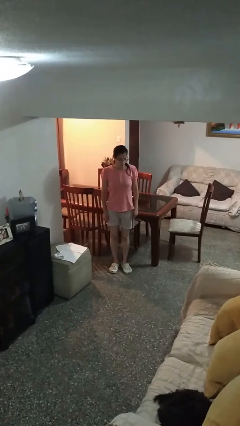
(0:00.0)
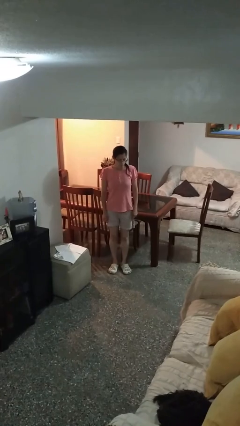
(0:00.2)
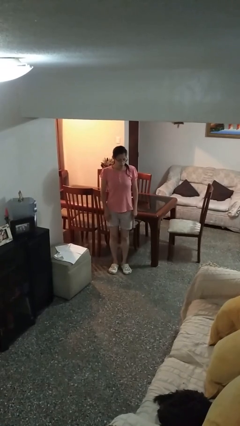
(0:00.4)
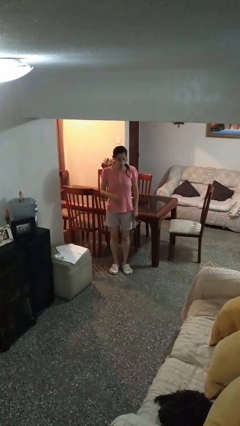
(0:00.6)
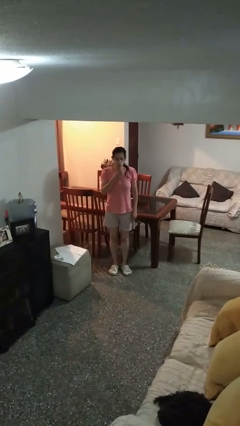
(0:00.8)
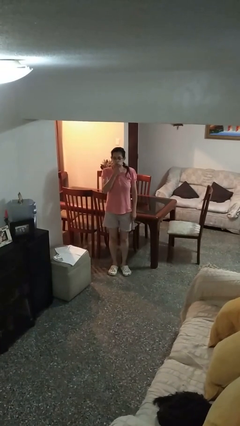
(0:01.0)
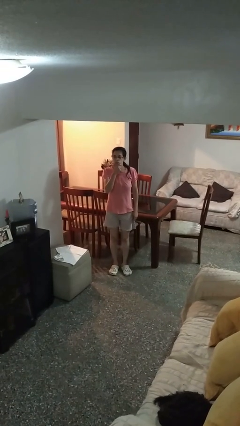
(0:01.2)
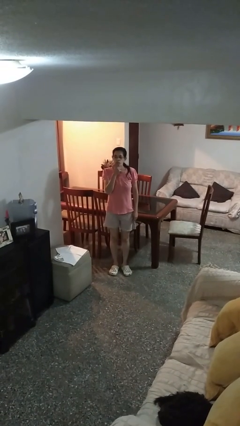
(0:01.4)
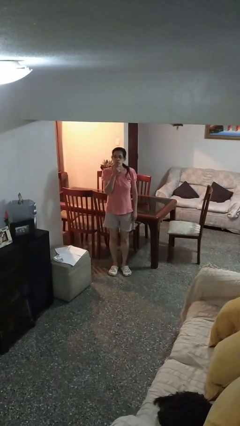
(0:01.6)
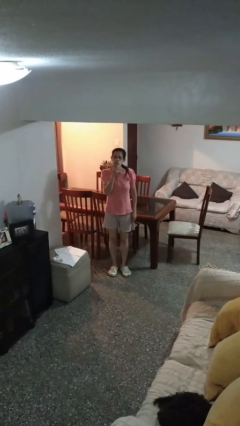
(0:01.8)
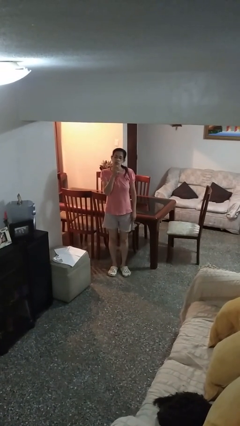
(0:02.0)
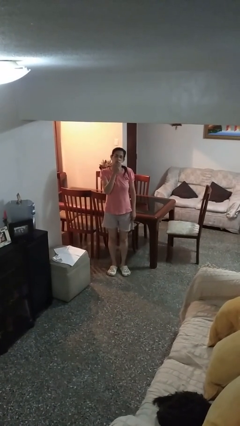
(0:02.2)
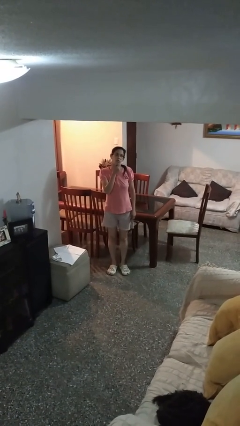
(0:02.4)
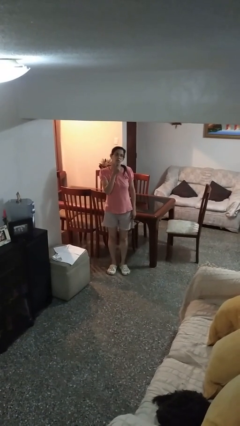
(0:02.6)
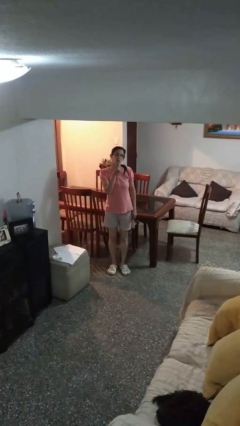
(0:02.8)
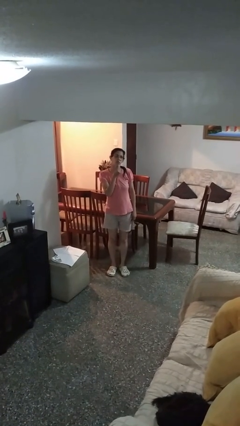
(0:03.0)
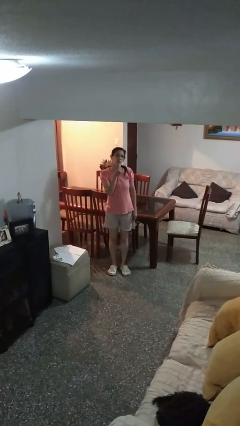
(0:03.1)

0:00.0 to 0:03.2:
person strokes chin

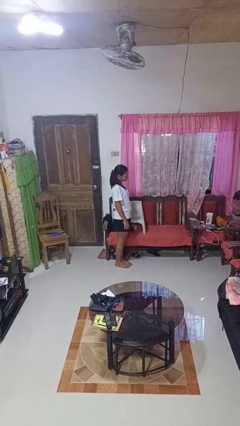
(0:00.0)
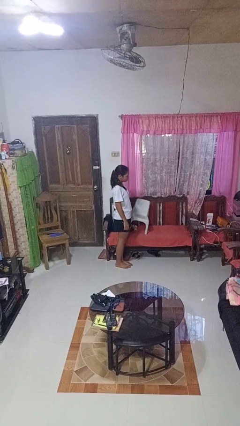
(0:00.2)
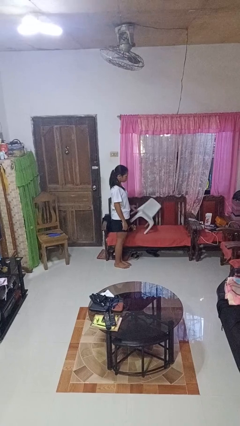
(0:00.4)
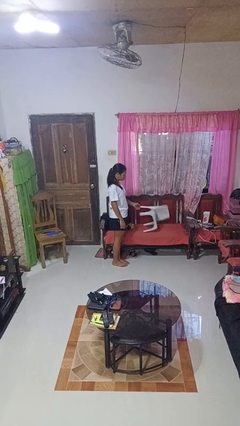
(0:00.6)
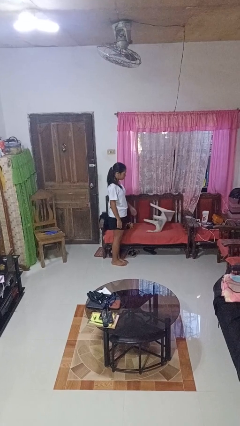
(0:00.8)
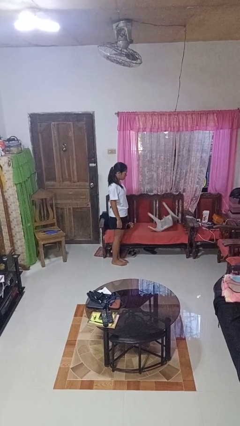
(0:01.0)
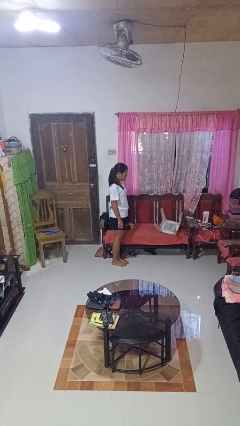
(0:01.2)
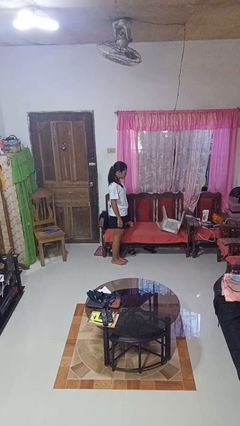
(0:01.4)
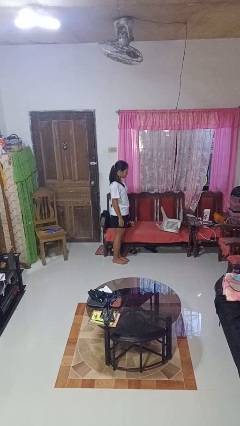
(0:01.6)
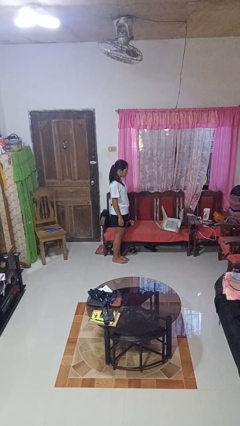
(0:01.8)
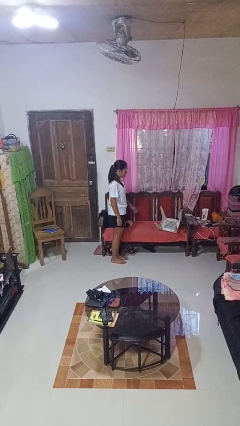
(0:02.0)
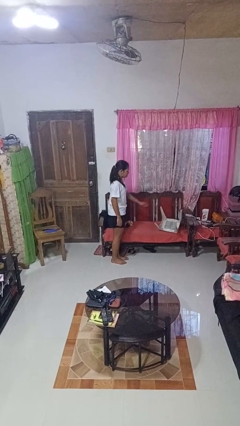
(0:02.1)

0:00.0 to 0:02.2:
person knocks over furniture

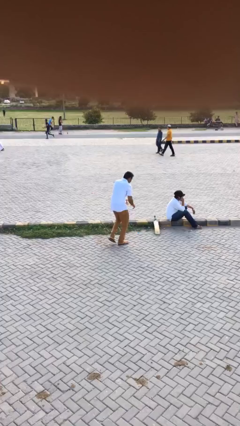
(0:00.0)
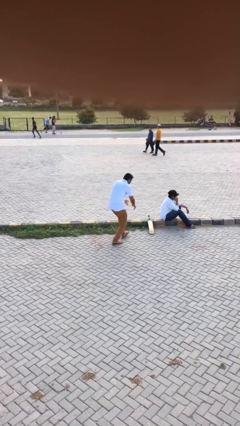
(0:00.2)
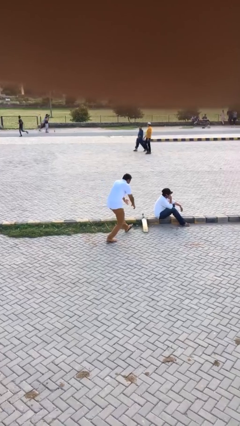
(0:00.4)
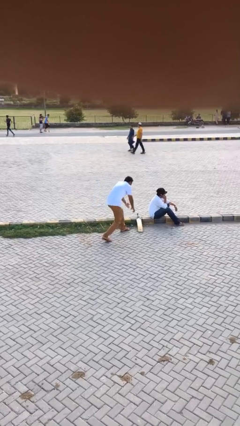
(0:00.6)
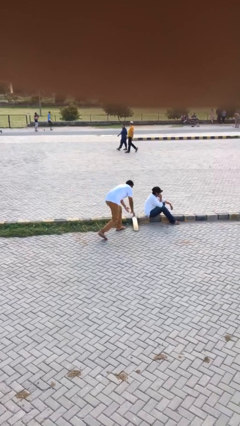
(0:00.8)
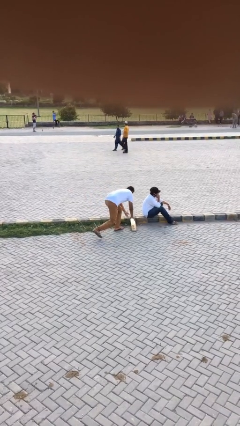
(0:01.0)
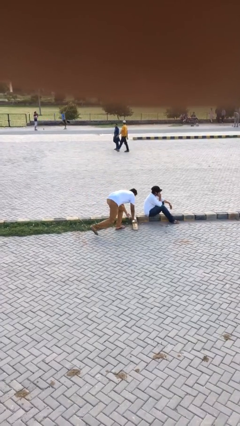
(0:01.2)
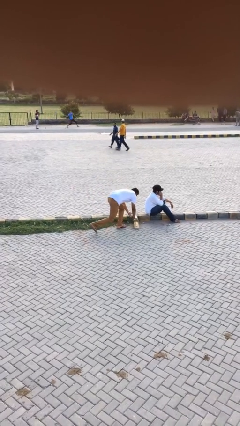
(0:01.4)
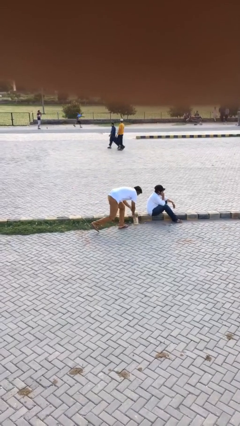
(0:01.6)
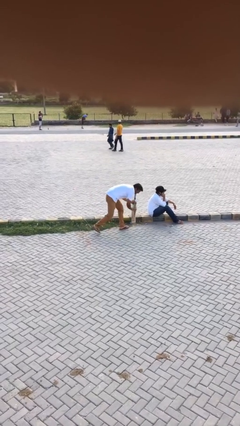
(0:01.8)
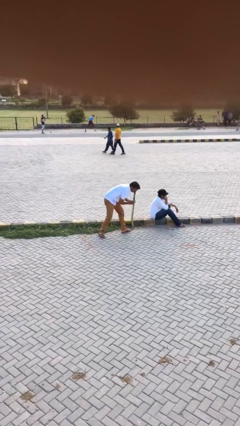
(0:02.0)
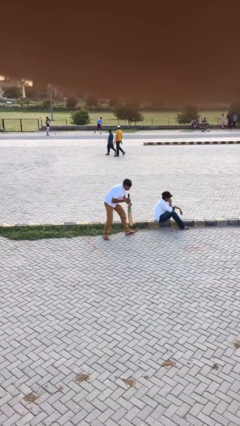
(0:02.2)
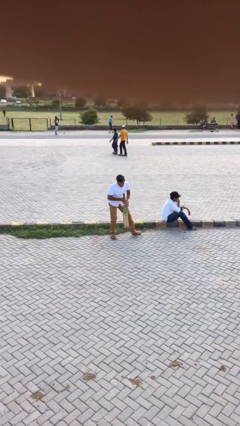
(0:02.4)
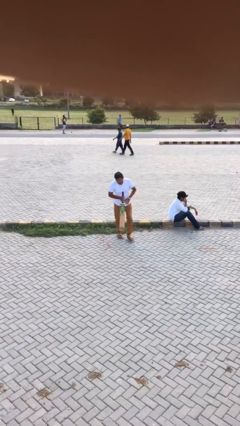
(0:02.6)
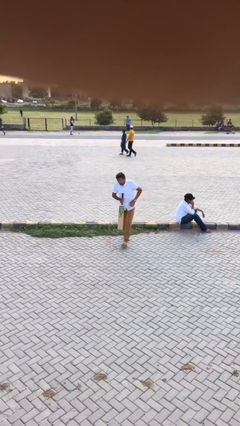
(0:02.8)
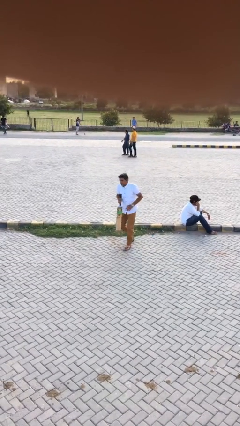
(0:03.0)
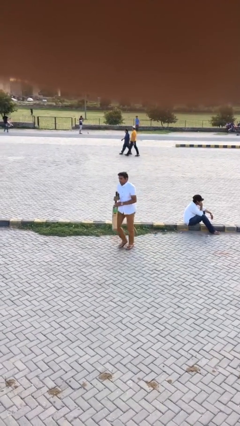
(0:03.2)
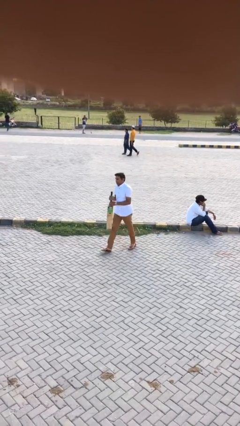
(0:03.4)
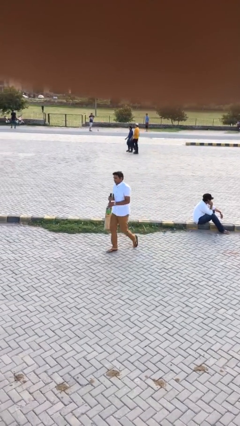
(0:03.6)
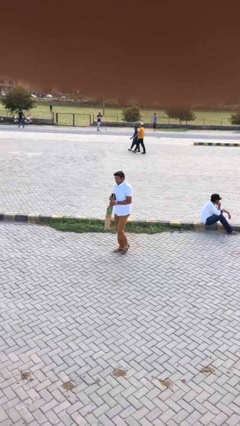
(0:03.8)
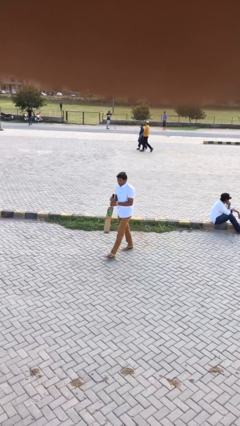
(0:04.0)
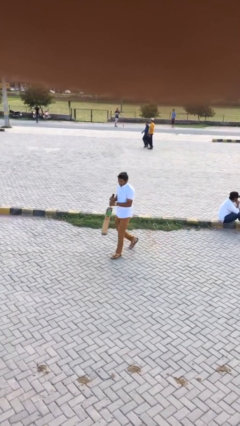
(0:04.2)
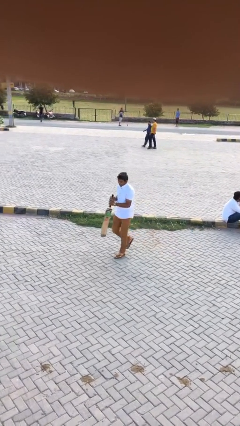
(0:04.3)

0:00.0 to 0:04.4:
person steals object from person

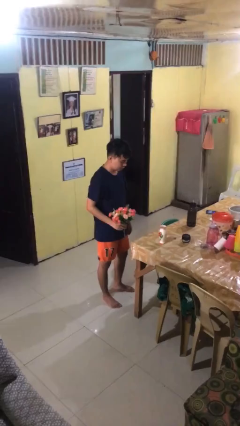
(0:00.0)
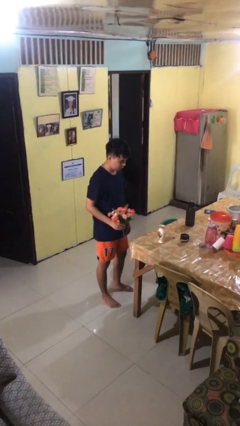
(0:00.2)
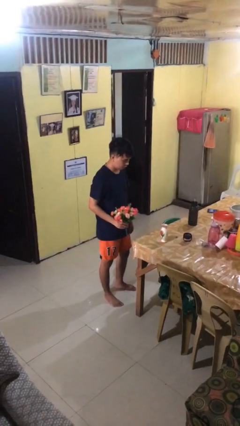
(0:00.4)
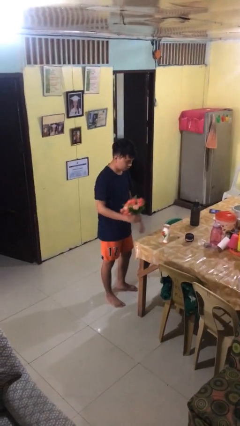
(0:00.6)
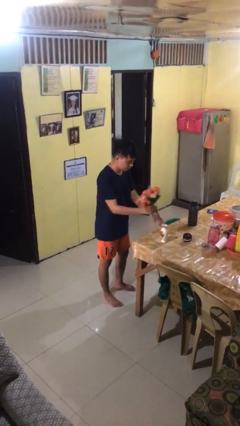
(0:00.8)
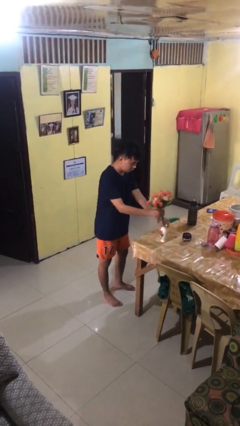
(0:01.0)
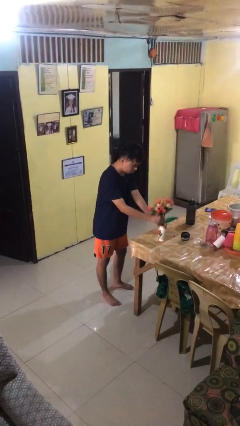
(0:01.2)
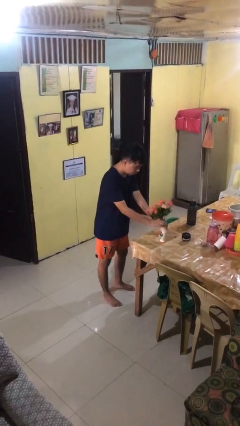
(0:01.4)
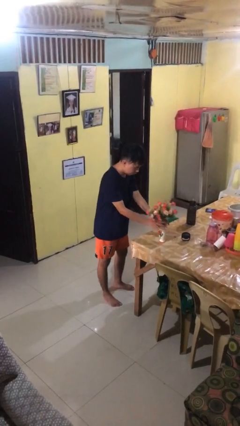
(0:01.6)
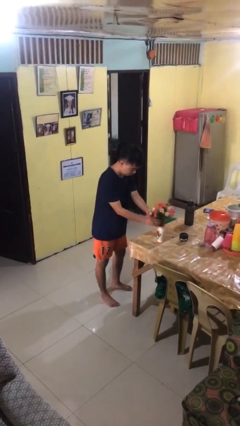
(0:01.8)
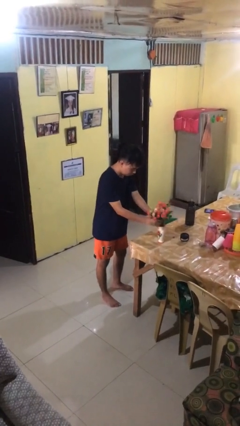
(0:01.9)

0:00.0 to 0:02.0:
person arranges flowers in vase

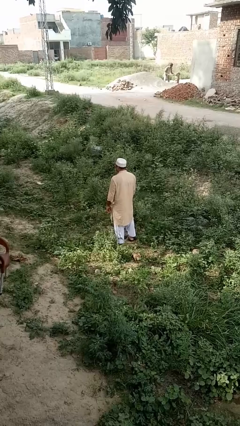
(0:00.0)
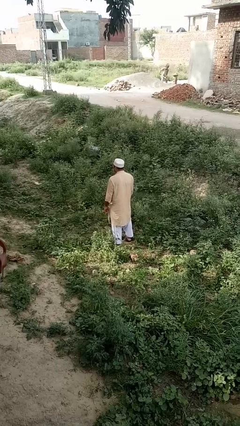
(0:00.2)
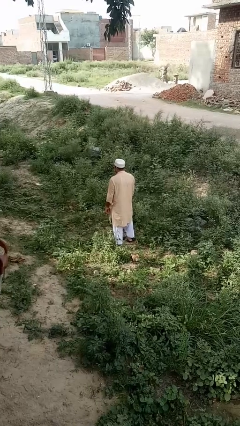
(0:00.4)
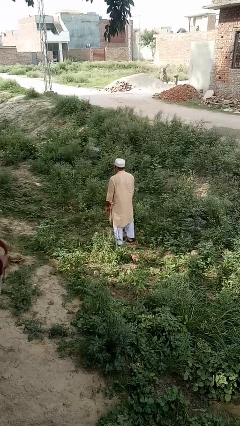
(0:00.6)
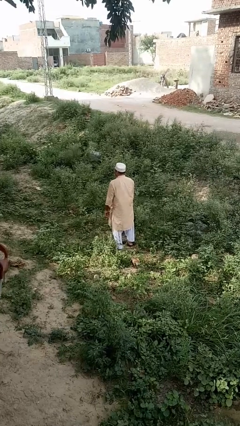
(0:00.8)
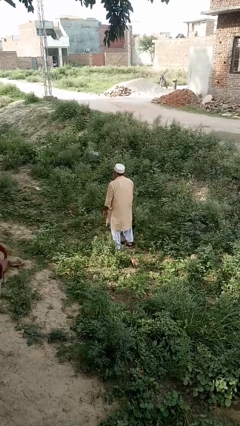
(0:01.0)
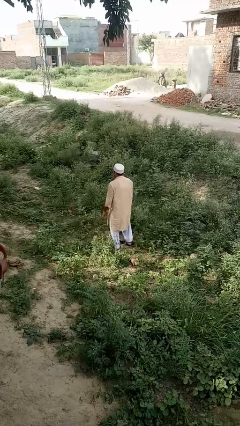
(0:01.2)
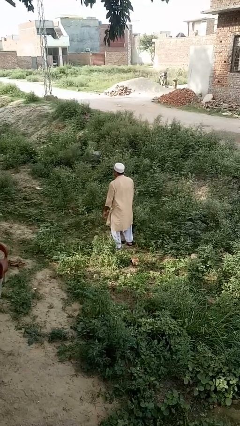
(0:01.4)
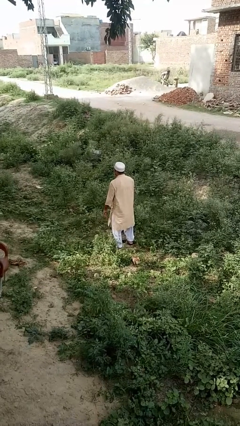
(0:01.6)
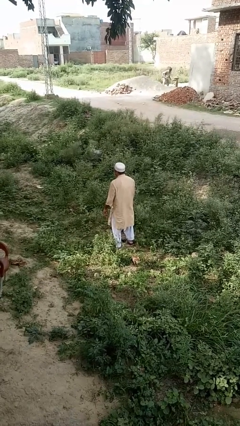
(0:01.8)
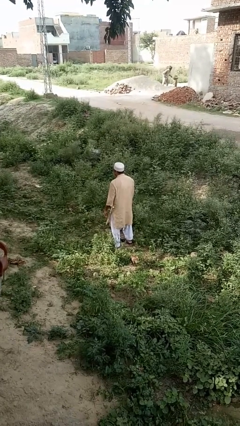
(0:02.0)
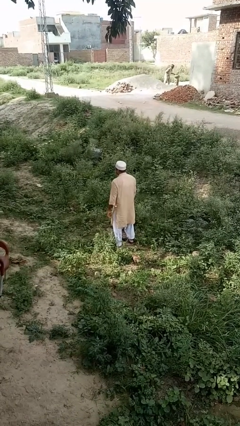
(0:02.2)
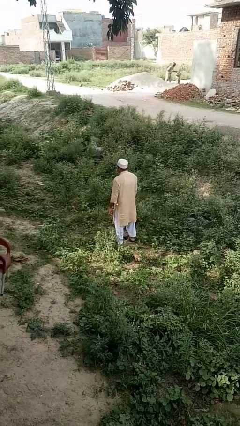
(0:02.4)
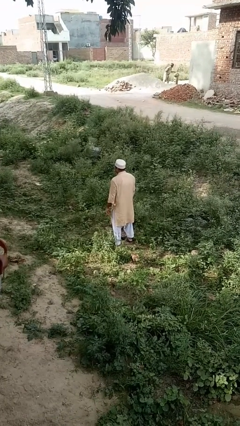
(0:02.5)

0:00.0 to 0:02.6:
person wiggles hips

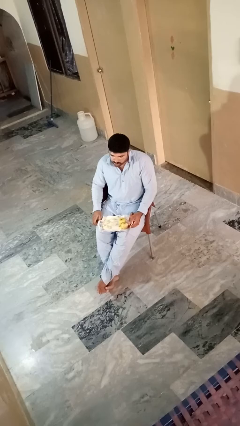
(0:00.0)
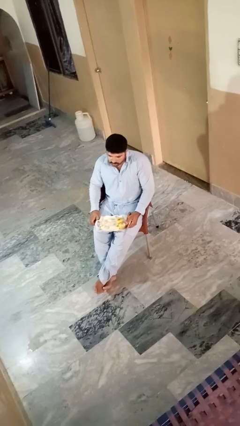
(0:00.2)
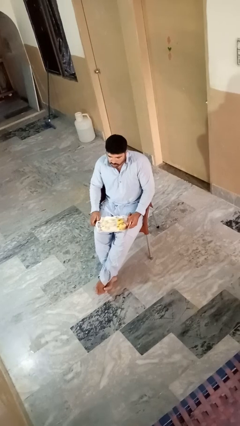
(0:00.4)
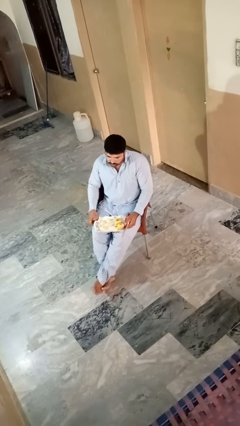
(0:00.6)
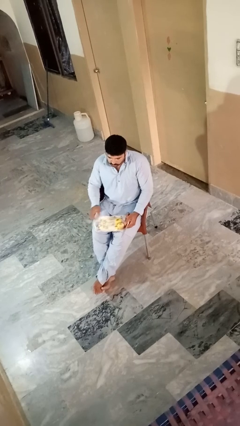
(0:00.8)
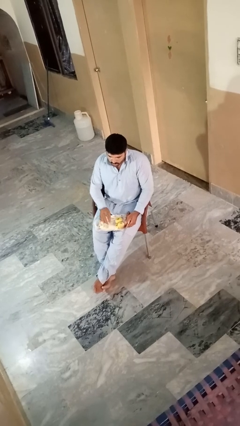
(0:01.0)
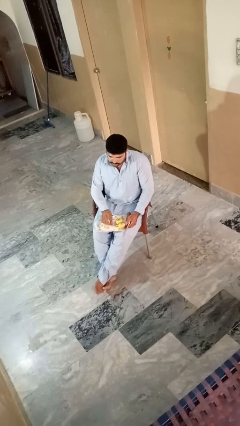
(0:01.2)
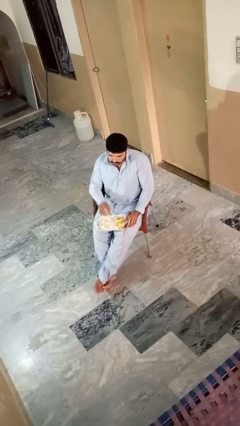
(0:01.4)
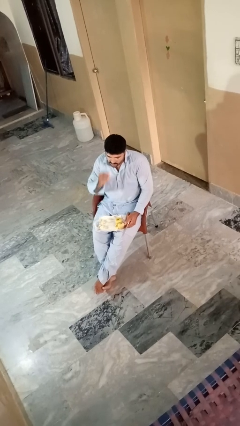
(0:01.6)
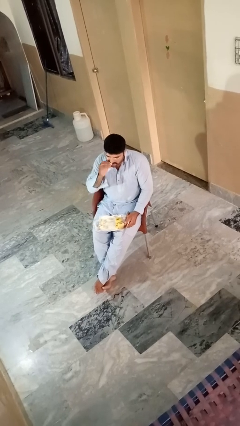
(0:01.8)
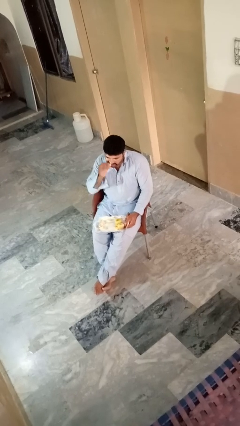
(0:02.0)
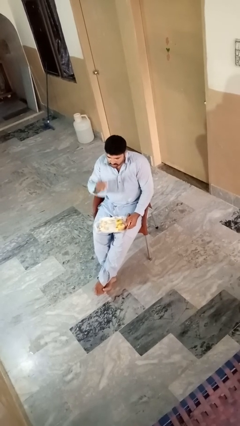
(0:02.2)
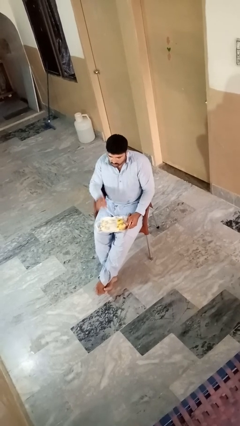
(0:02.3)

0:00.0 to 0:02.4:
person eats apple

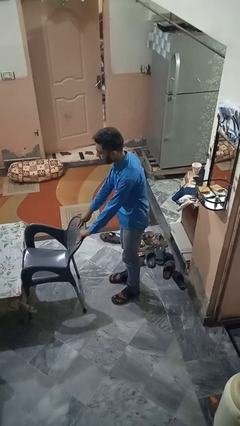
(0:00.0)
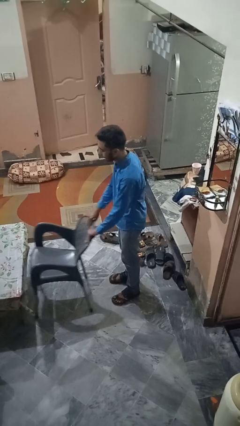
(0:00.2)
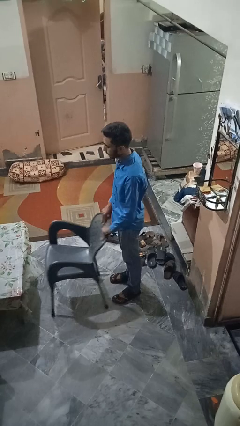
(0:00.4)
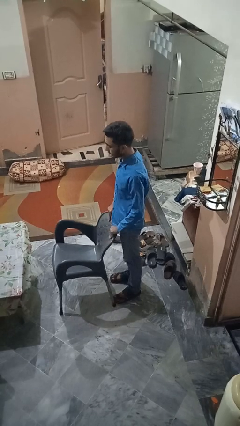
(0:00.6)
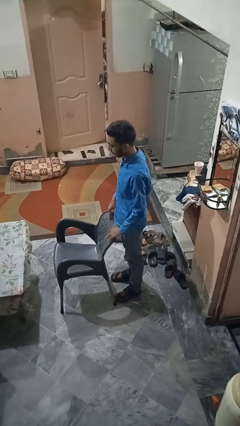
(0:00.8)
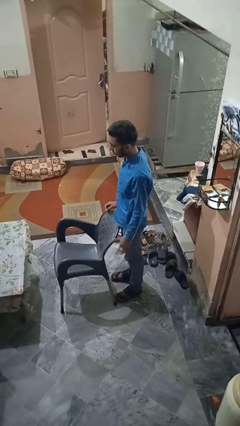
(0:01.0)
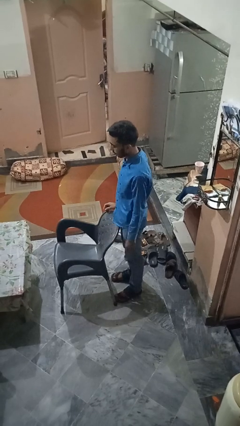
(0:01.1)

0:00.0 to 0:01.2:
person pulls out chair
